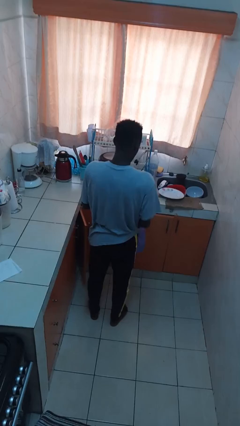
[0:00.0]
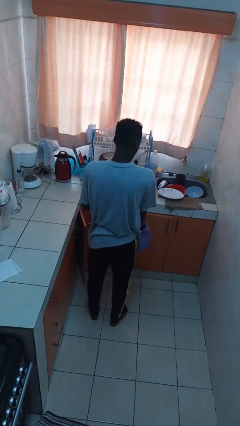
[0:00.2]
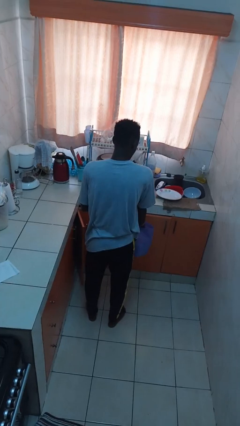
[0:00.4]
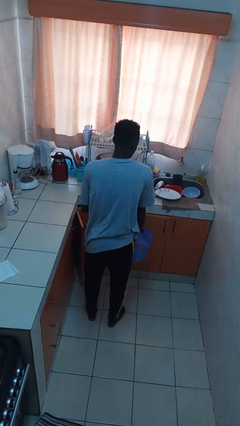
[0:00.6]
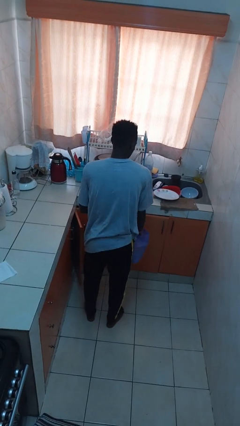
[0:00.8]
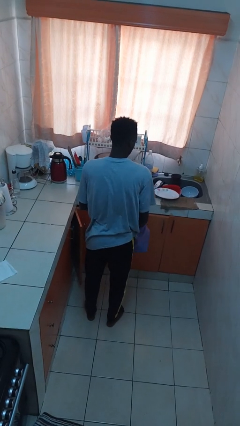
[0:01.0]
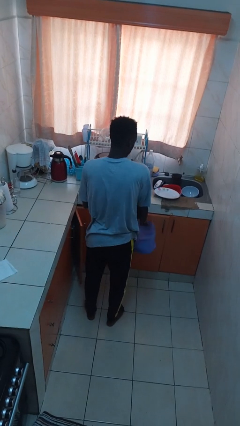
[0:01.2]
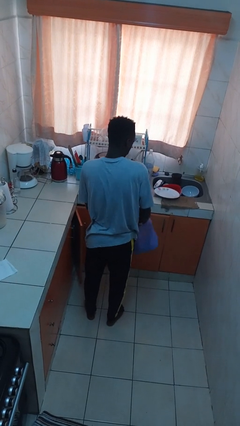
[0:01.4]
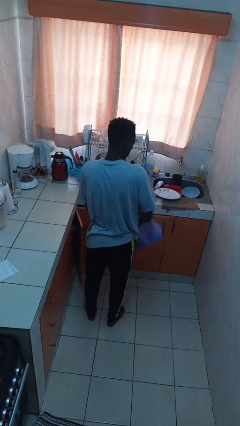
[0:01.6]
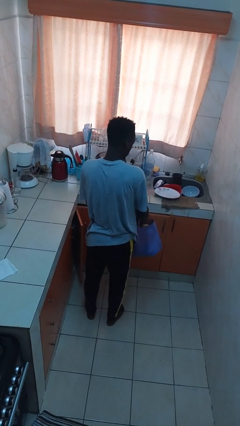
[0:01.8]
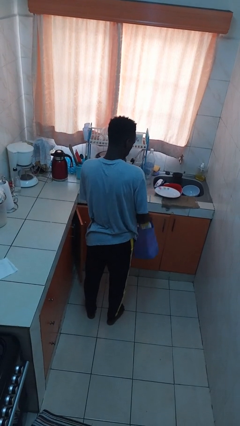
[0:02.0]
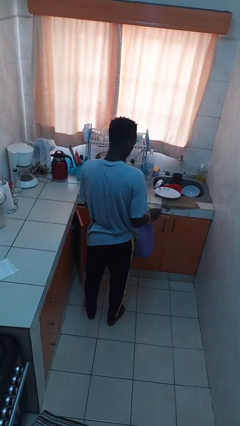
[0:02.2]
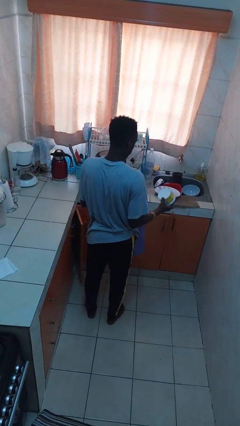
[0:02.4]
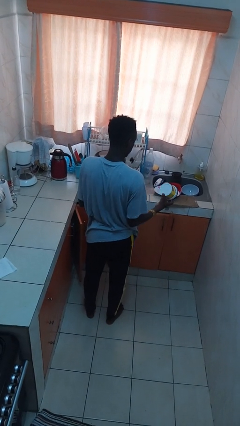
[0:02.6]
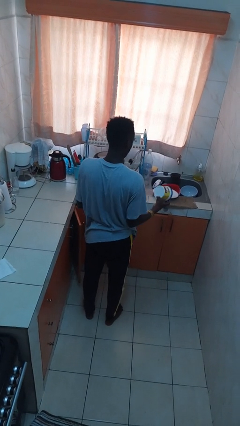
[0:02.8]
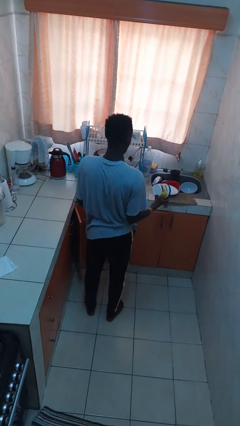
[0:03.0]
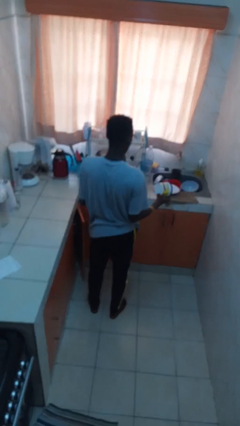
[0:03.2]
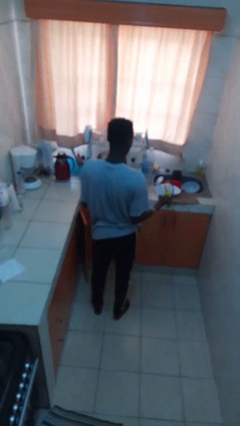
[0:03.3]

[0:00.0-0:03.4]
person takes object from bag

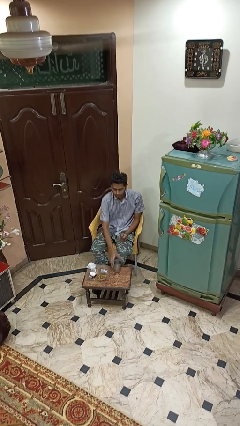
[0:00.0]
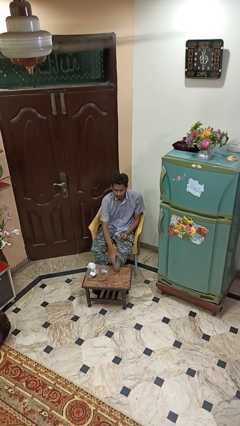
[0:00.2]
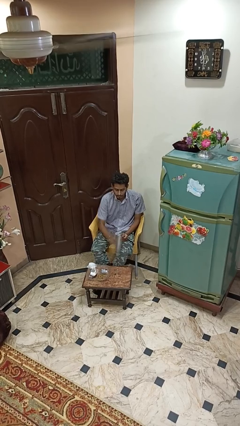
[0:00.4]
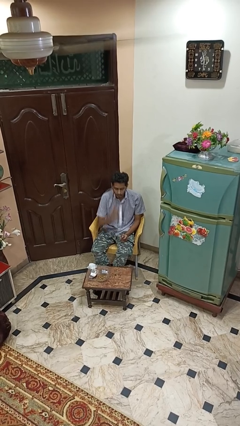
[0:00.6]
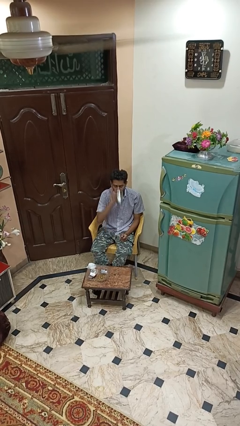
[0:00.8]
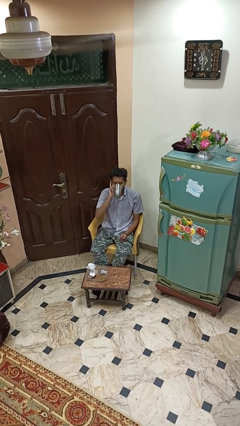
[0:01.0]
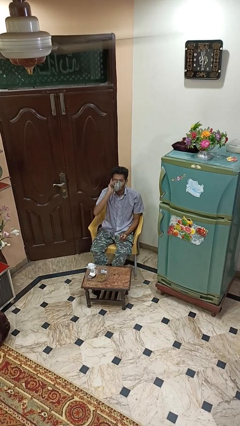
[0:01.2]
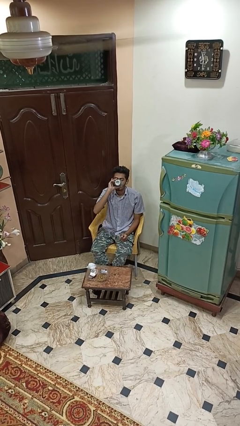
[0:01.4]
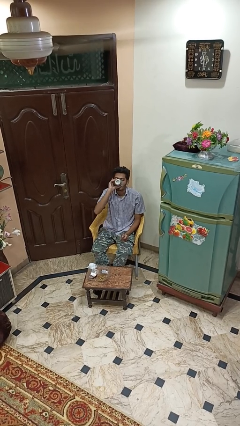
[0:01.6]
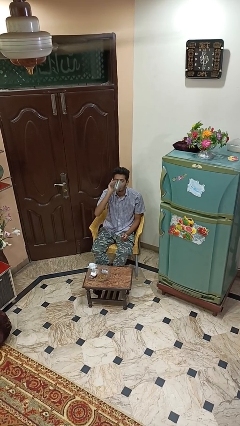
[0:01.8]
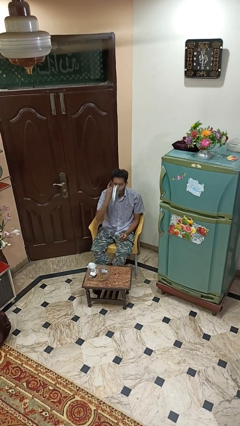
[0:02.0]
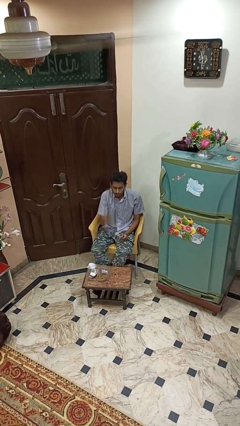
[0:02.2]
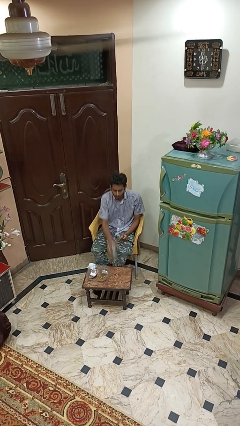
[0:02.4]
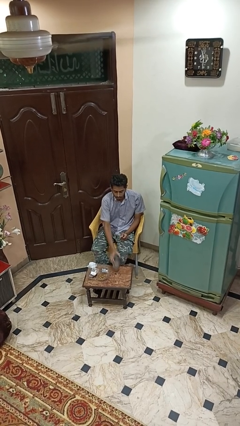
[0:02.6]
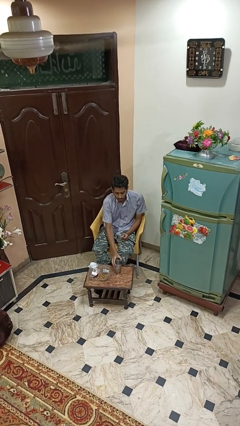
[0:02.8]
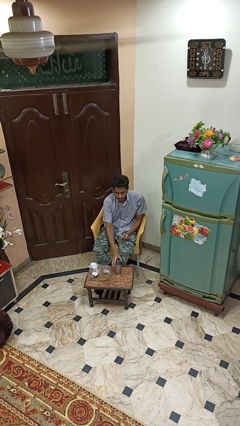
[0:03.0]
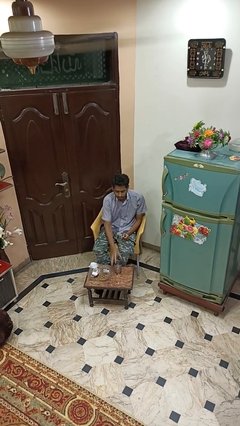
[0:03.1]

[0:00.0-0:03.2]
person drinks from cup

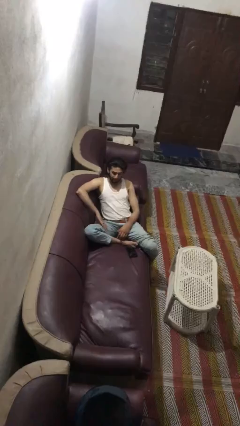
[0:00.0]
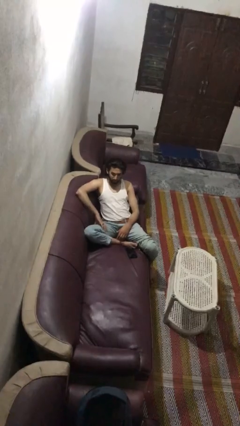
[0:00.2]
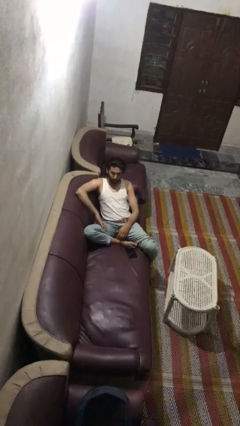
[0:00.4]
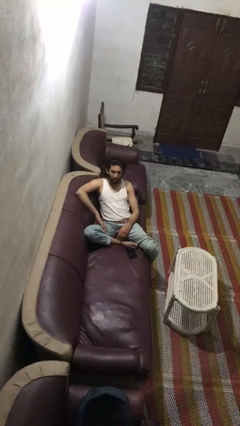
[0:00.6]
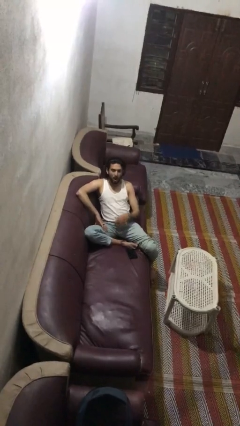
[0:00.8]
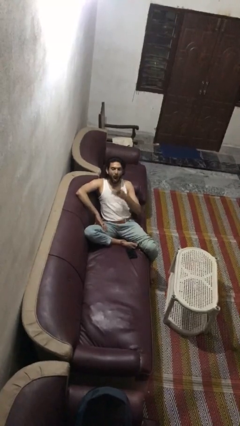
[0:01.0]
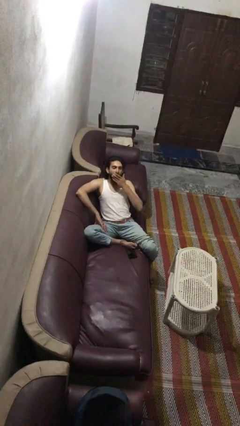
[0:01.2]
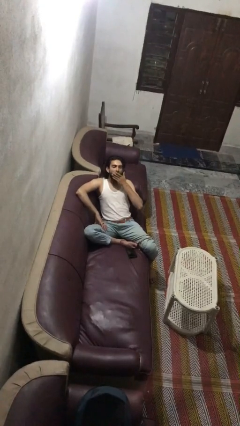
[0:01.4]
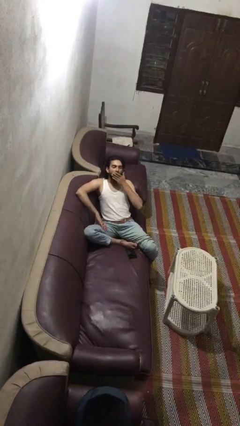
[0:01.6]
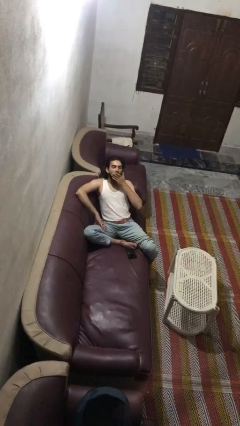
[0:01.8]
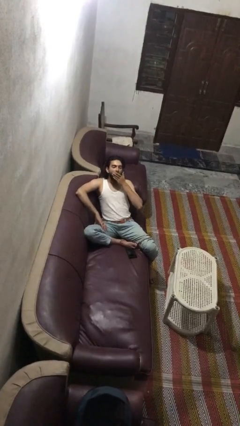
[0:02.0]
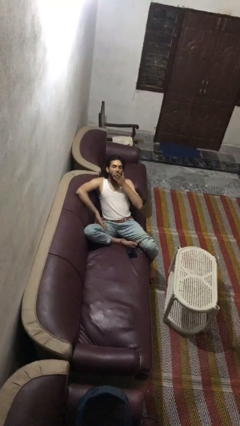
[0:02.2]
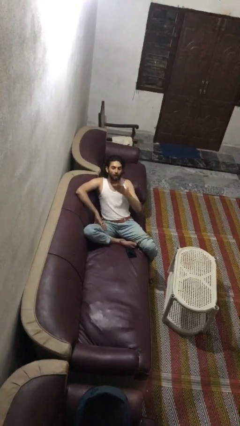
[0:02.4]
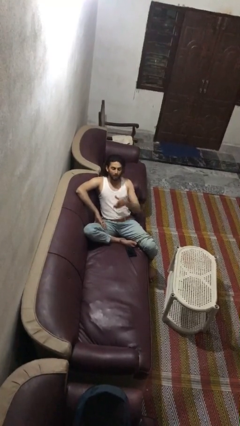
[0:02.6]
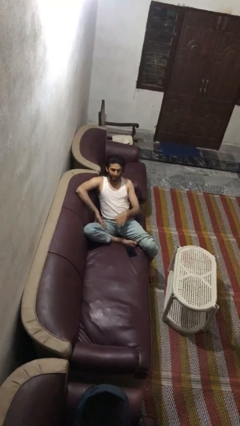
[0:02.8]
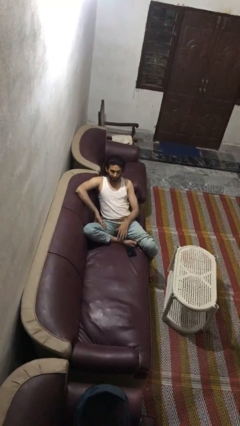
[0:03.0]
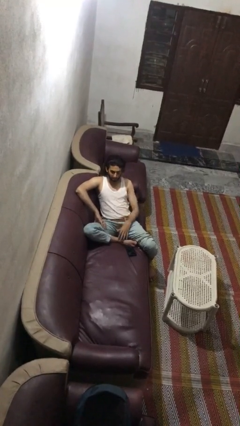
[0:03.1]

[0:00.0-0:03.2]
person yawns

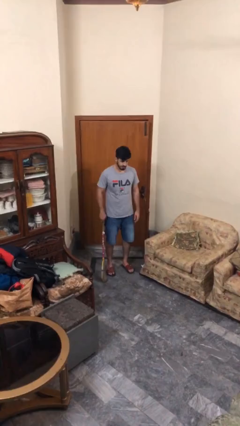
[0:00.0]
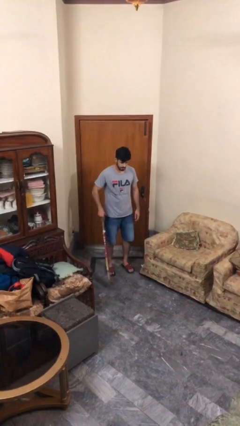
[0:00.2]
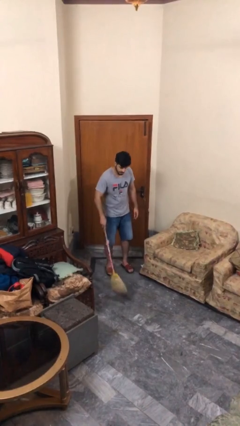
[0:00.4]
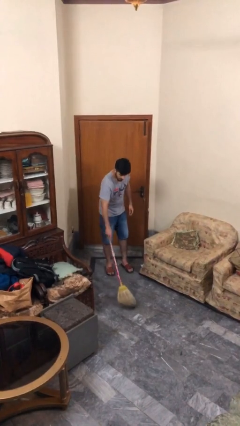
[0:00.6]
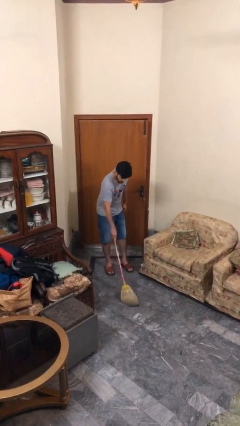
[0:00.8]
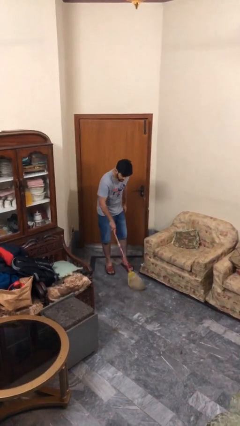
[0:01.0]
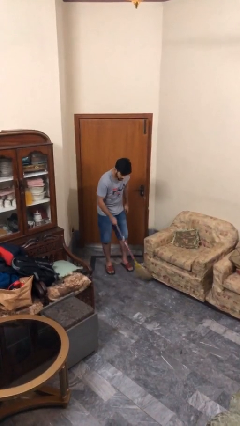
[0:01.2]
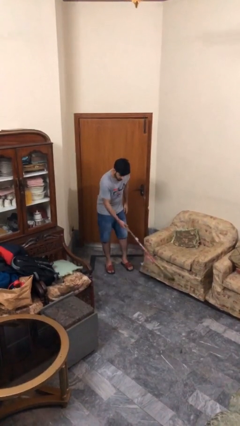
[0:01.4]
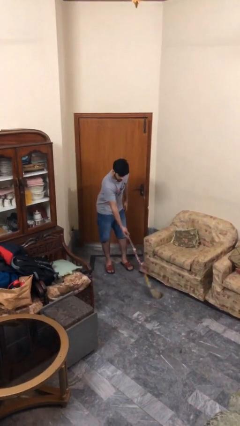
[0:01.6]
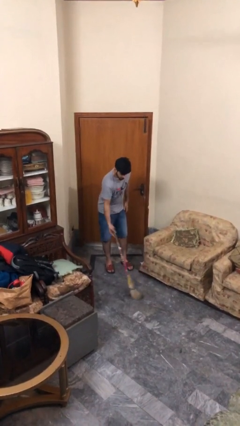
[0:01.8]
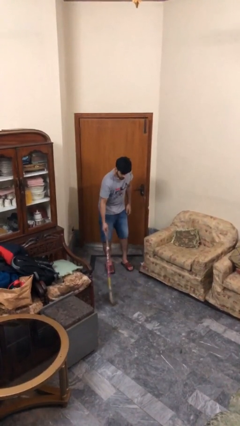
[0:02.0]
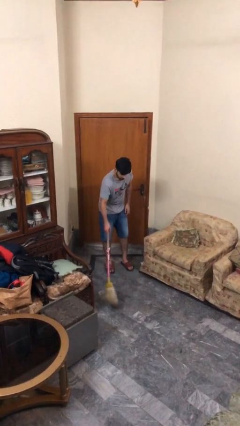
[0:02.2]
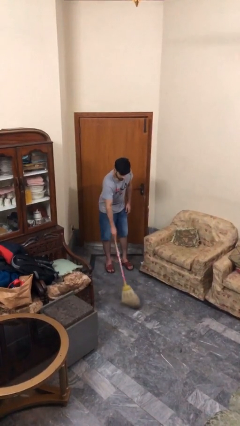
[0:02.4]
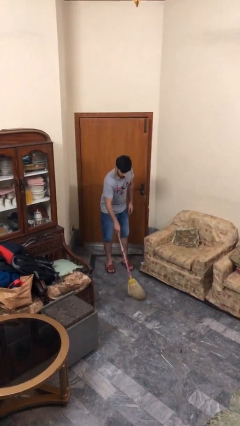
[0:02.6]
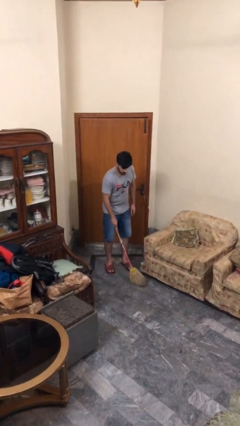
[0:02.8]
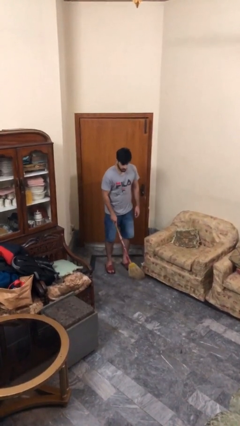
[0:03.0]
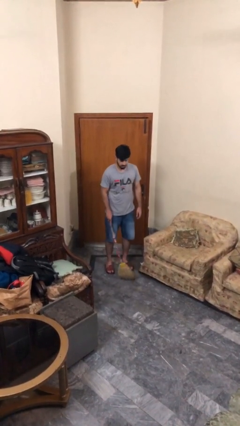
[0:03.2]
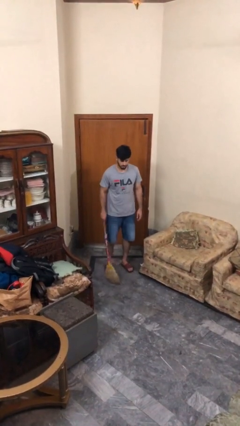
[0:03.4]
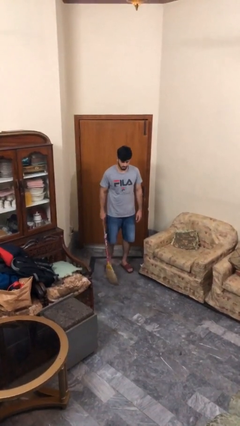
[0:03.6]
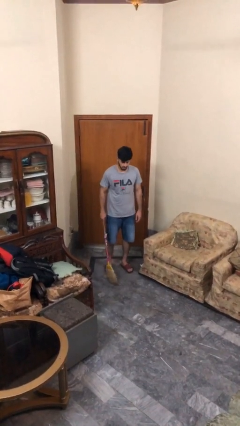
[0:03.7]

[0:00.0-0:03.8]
person sweeps floor

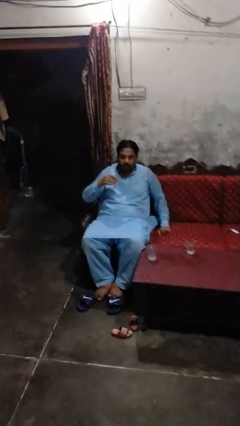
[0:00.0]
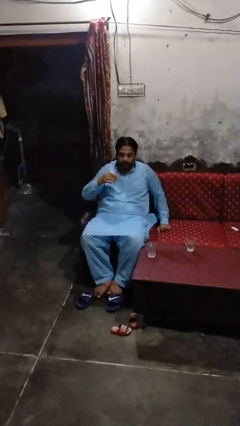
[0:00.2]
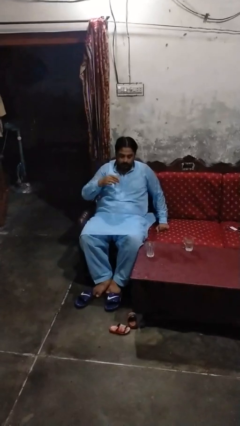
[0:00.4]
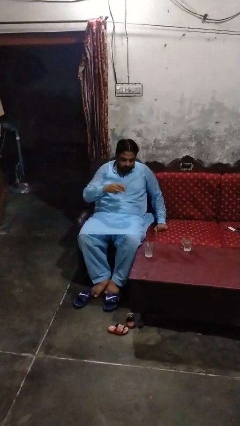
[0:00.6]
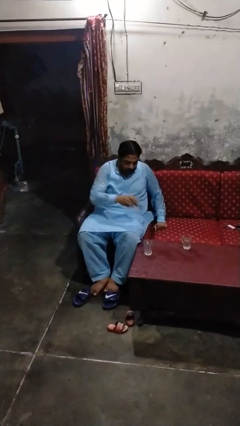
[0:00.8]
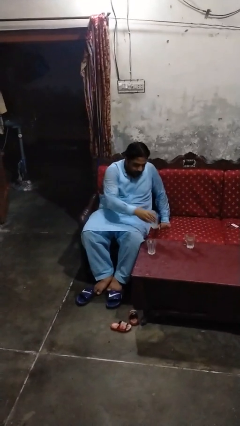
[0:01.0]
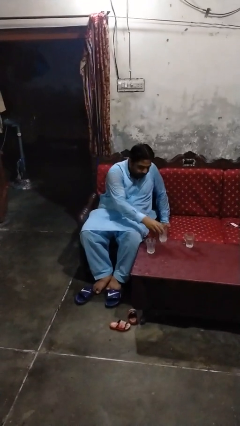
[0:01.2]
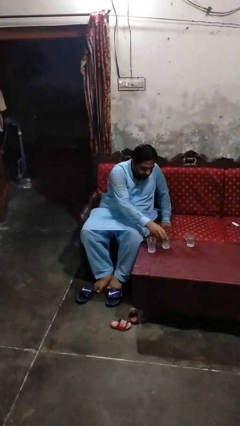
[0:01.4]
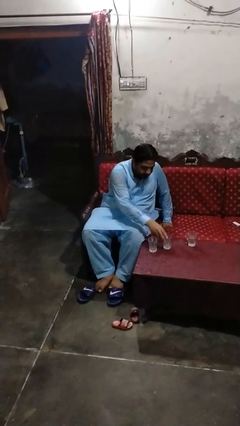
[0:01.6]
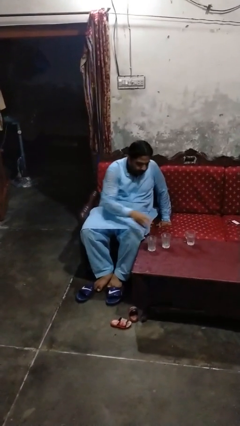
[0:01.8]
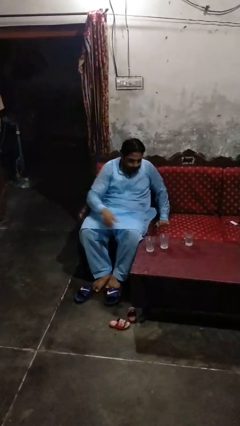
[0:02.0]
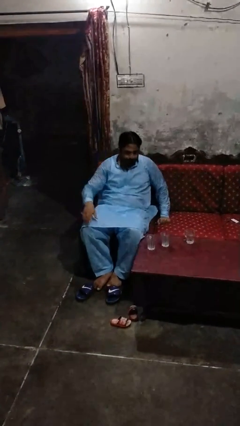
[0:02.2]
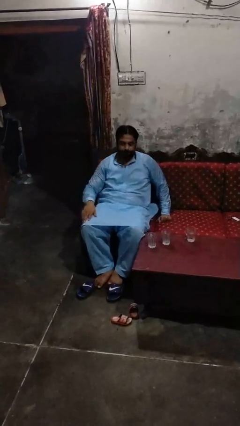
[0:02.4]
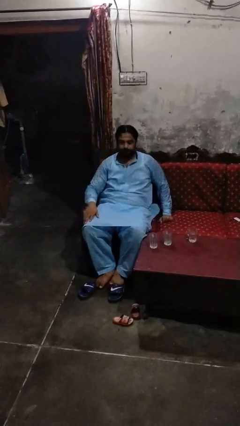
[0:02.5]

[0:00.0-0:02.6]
person puts down object on table

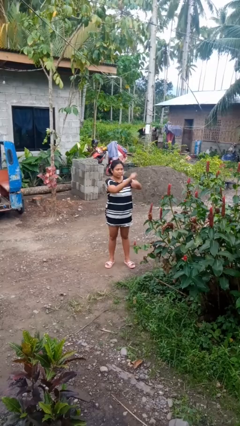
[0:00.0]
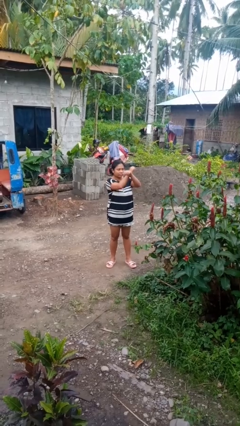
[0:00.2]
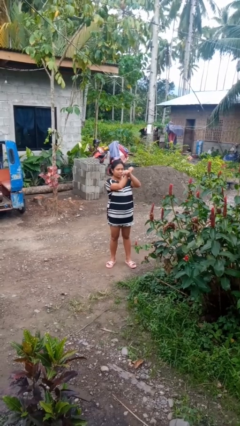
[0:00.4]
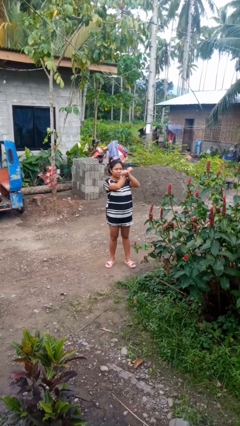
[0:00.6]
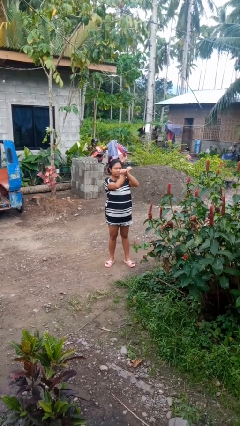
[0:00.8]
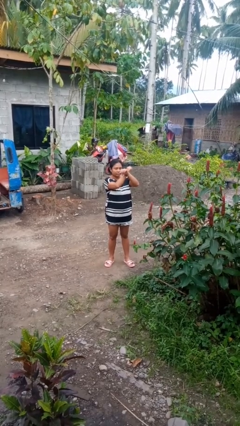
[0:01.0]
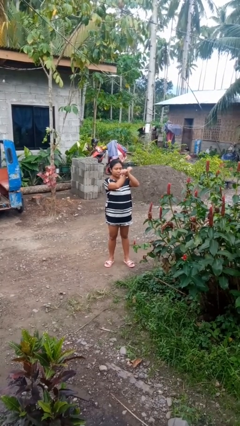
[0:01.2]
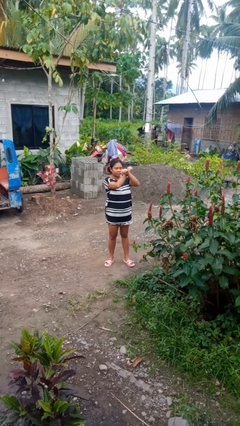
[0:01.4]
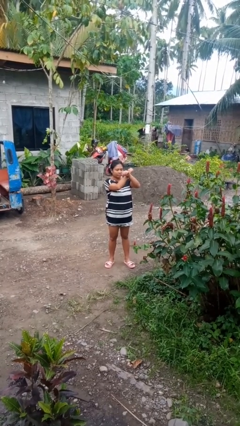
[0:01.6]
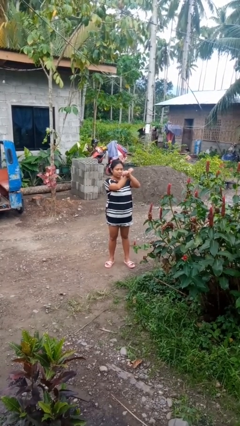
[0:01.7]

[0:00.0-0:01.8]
person gestures arms x
